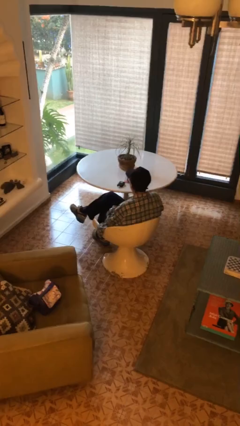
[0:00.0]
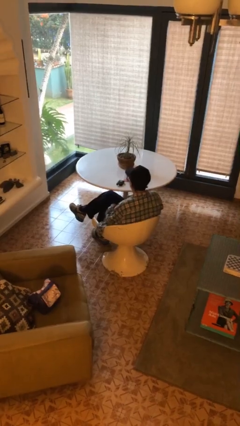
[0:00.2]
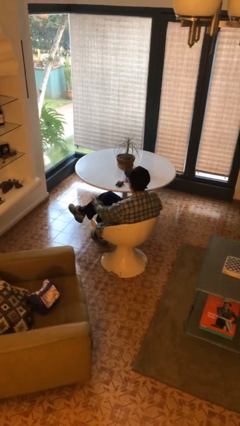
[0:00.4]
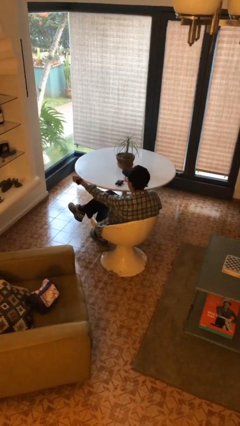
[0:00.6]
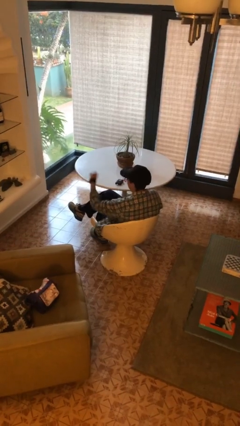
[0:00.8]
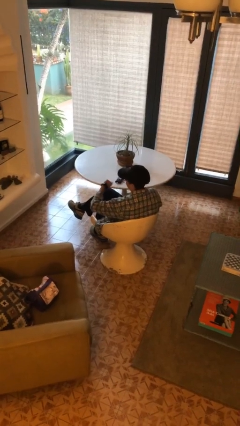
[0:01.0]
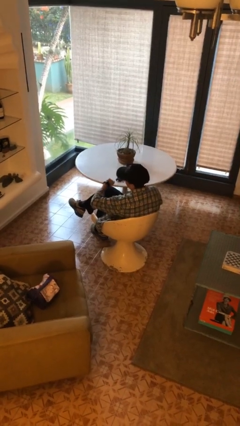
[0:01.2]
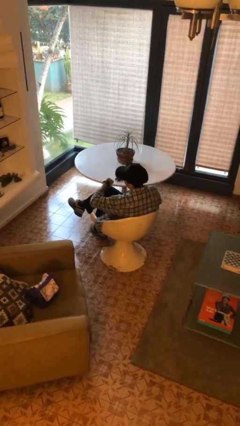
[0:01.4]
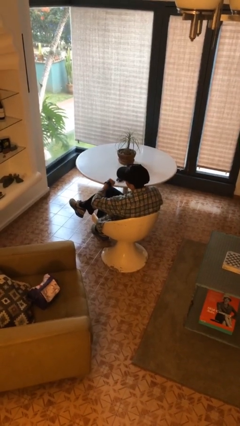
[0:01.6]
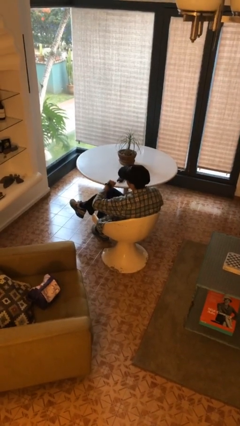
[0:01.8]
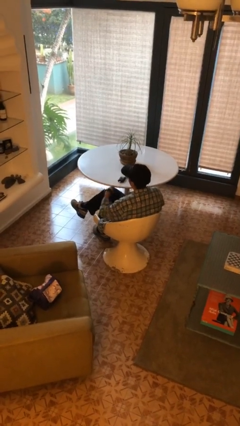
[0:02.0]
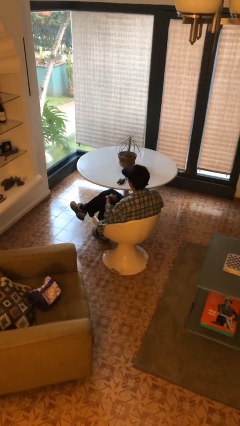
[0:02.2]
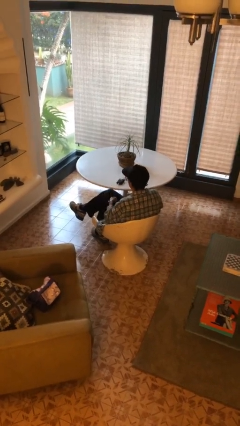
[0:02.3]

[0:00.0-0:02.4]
person looks at wristwatch

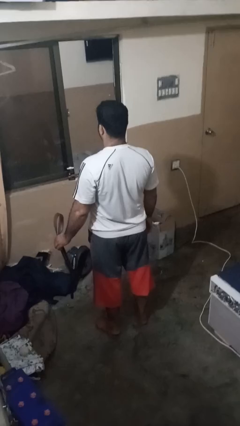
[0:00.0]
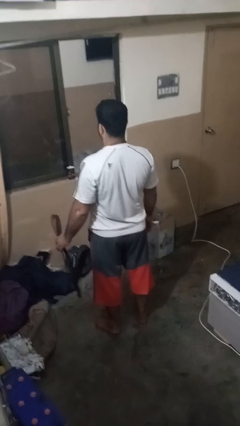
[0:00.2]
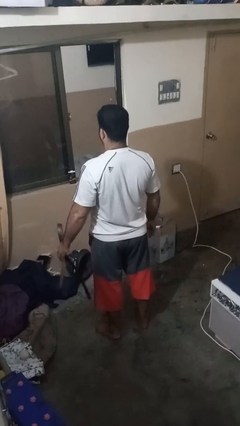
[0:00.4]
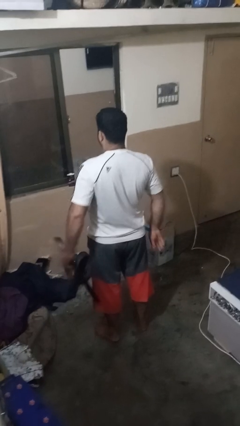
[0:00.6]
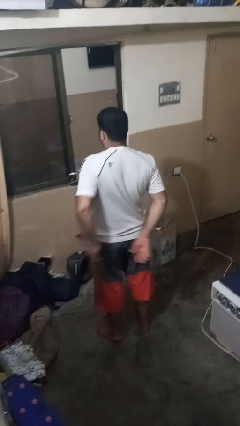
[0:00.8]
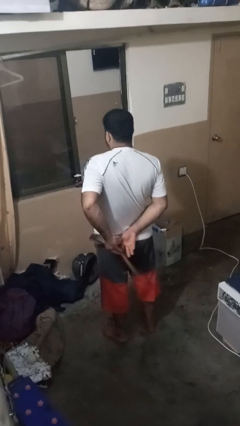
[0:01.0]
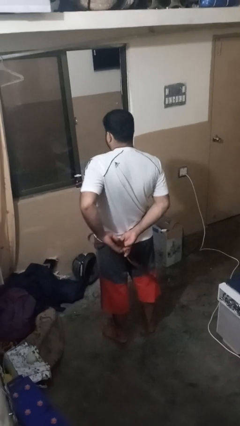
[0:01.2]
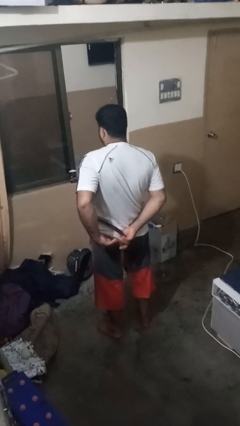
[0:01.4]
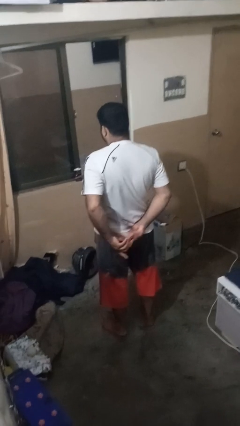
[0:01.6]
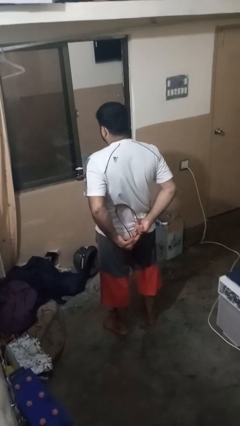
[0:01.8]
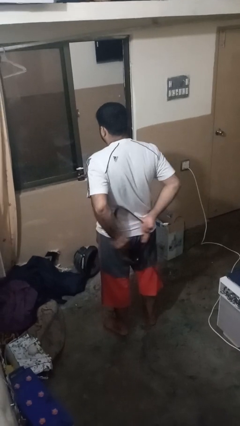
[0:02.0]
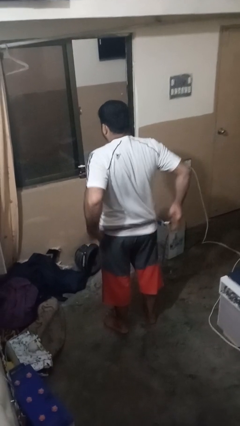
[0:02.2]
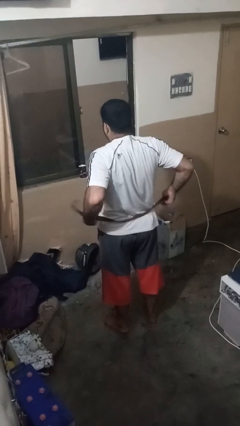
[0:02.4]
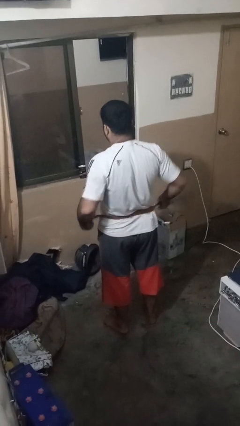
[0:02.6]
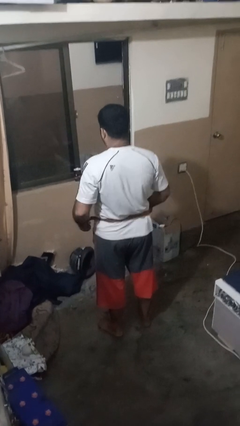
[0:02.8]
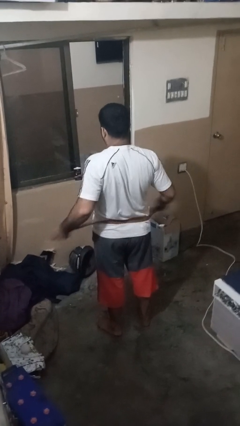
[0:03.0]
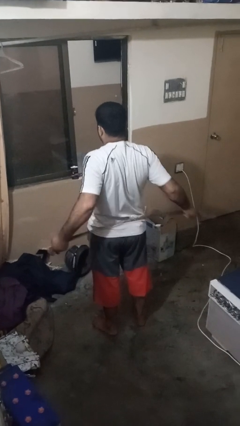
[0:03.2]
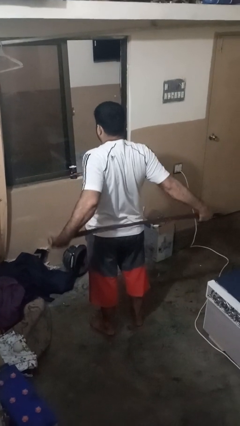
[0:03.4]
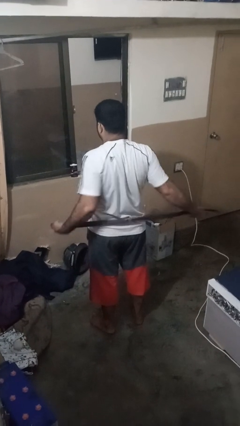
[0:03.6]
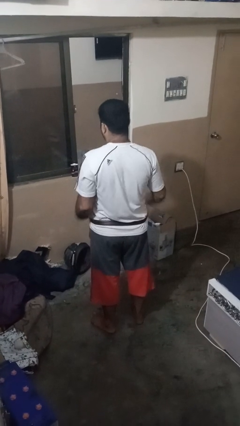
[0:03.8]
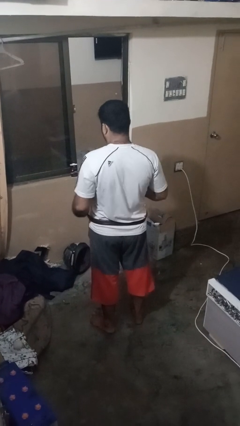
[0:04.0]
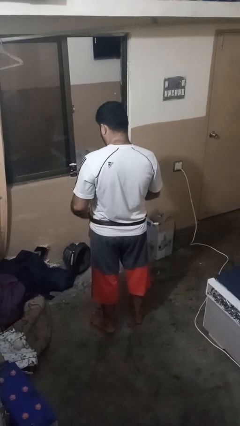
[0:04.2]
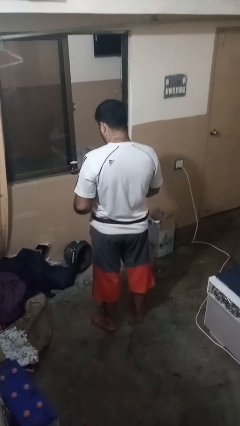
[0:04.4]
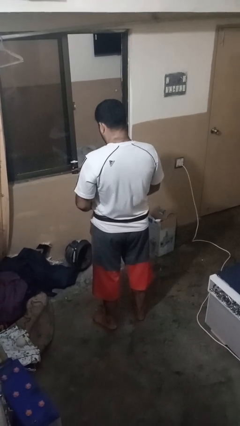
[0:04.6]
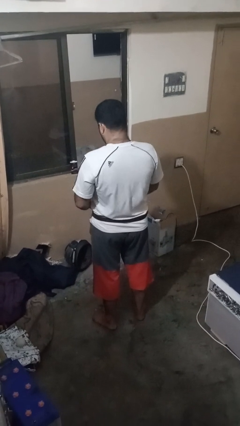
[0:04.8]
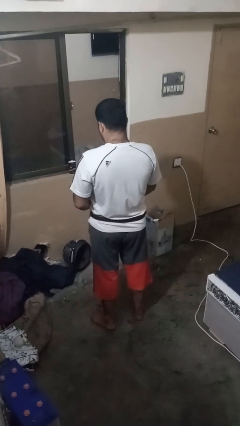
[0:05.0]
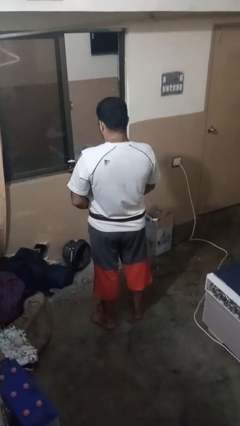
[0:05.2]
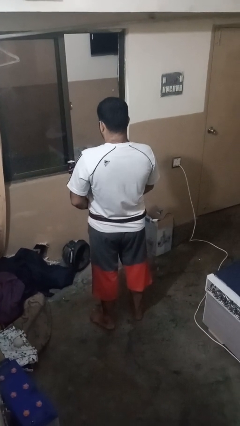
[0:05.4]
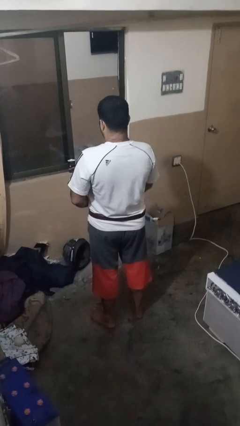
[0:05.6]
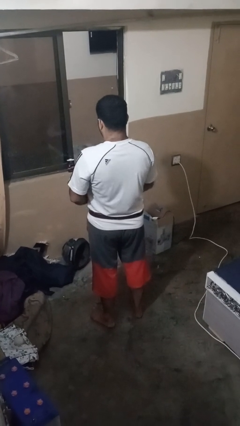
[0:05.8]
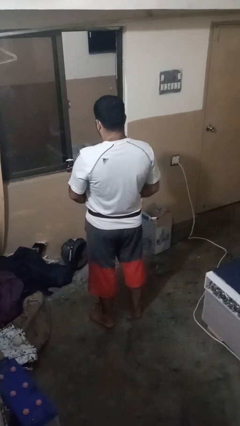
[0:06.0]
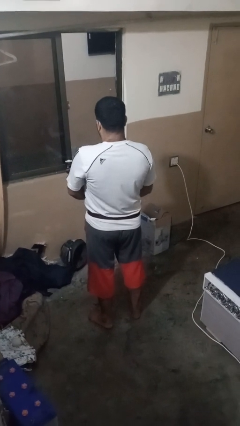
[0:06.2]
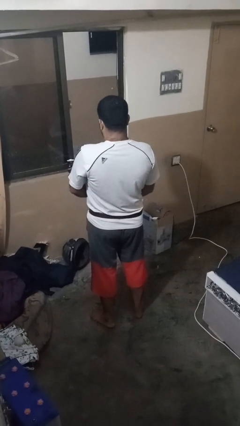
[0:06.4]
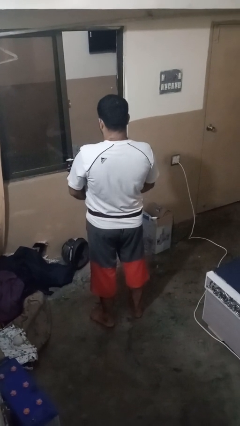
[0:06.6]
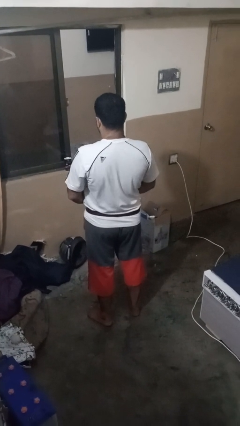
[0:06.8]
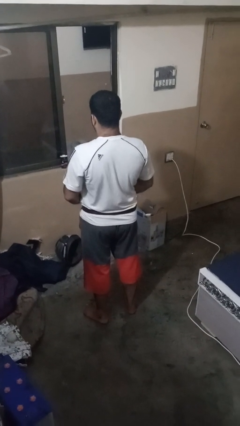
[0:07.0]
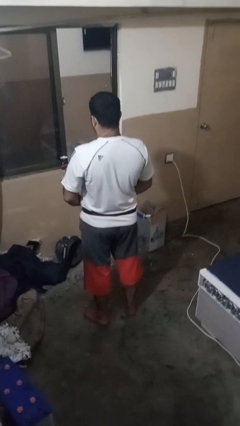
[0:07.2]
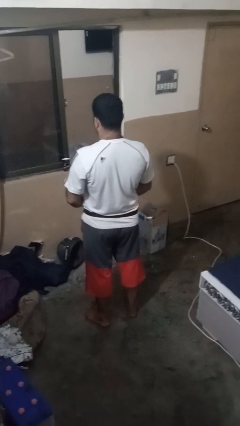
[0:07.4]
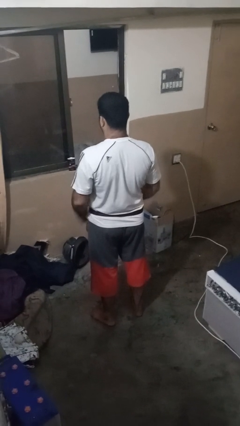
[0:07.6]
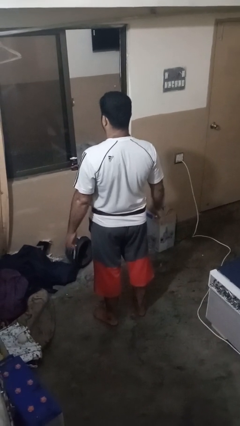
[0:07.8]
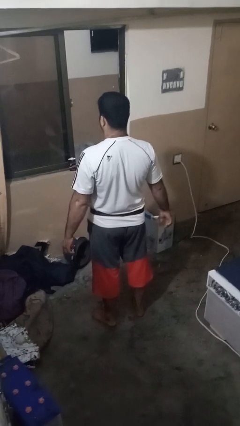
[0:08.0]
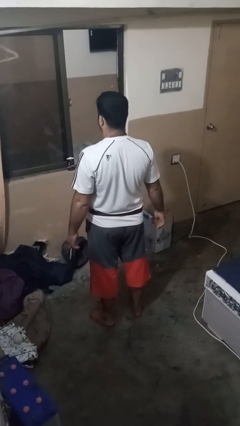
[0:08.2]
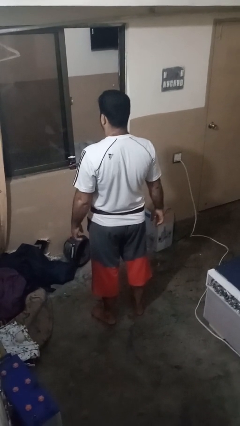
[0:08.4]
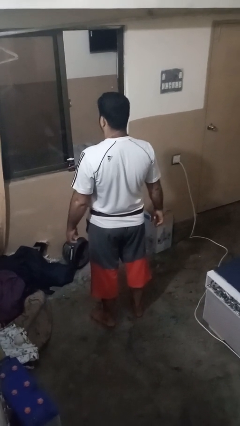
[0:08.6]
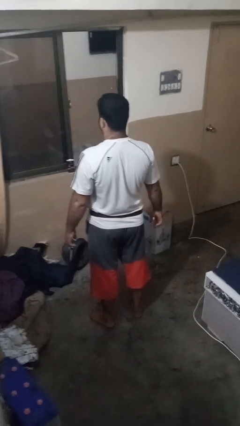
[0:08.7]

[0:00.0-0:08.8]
person puts on belt

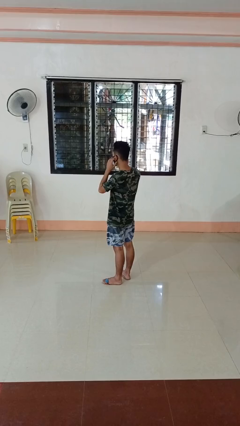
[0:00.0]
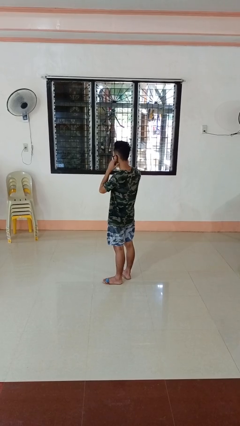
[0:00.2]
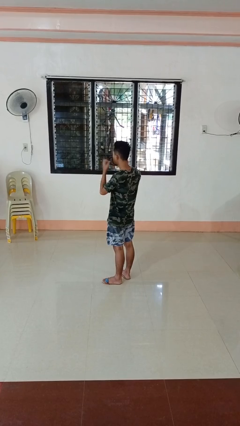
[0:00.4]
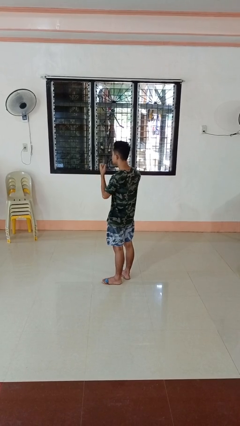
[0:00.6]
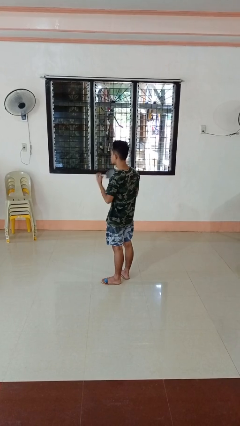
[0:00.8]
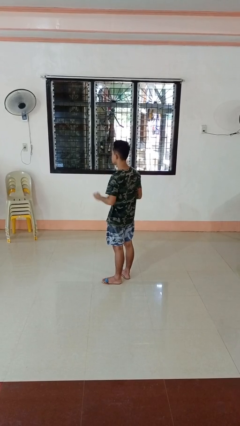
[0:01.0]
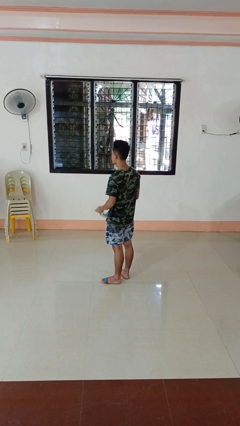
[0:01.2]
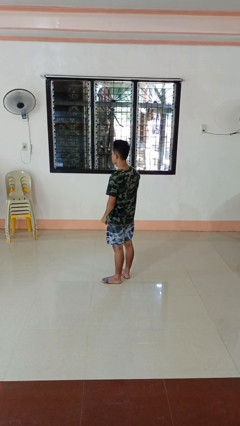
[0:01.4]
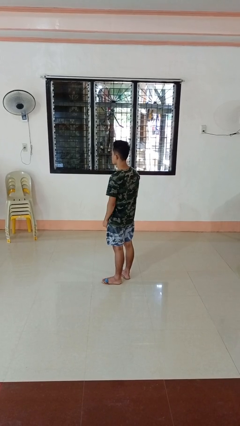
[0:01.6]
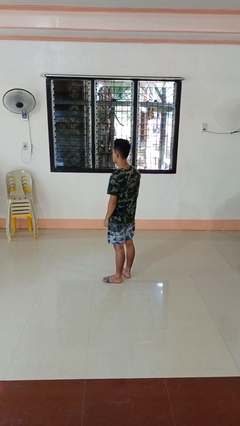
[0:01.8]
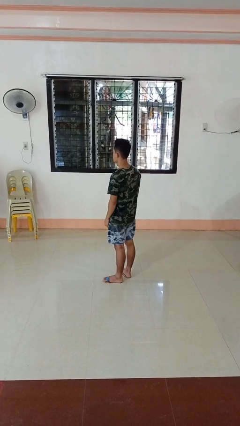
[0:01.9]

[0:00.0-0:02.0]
person takes off facemask

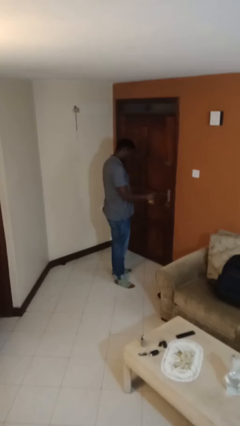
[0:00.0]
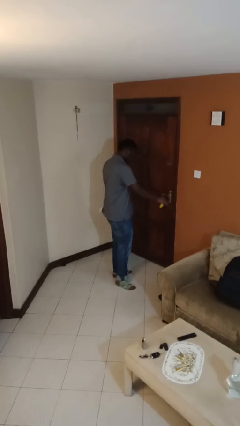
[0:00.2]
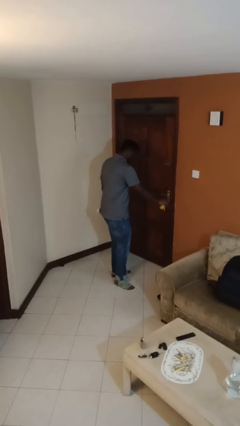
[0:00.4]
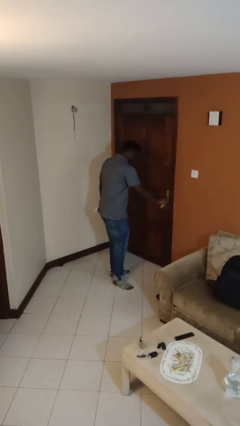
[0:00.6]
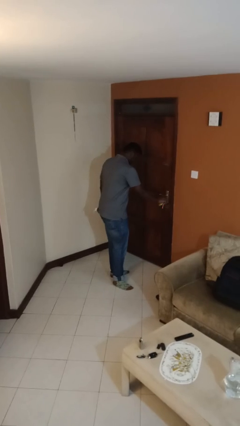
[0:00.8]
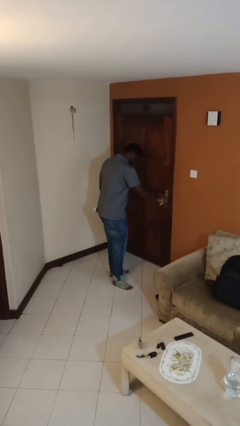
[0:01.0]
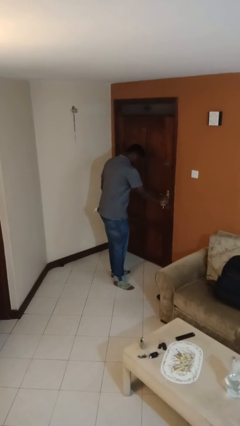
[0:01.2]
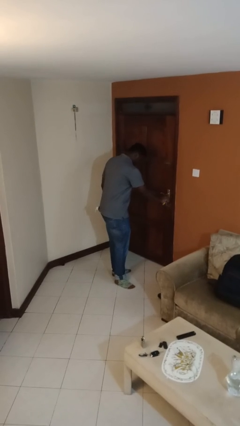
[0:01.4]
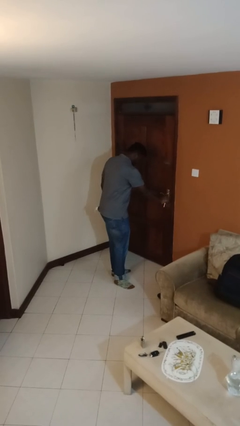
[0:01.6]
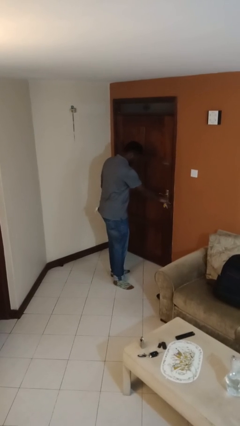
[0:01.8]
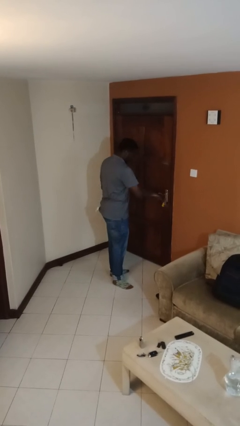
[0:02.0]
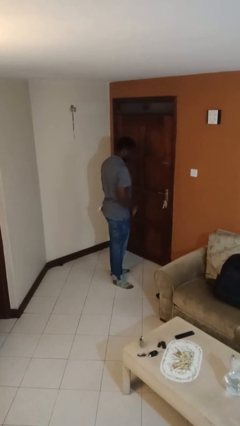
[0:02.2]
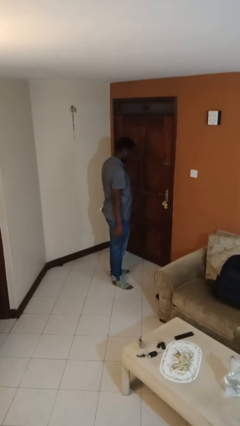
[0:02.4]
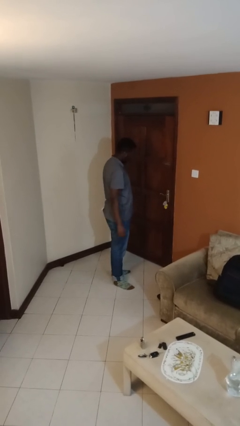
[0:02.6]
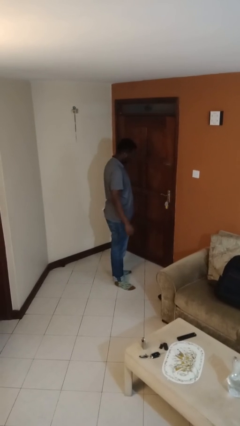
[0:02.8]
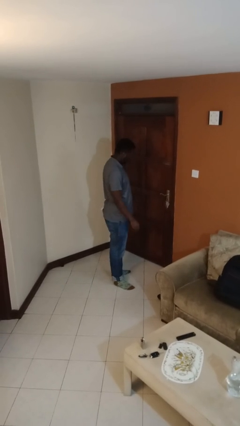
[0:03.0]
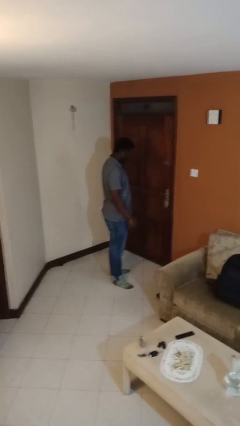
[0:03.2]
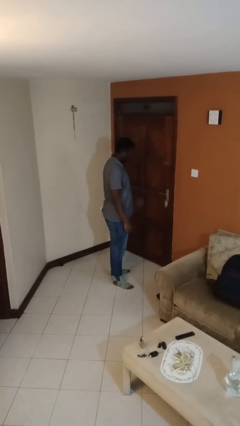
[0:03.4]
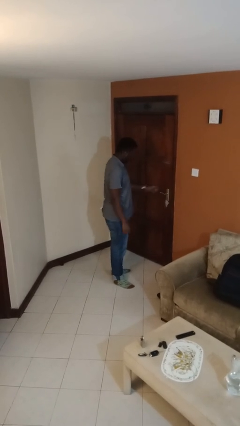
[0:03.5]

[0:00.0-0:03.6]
person unlocks door with keys

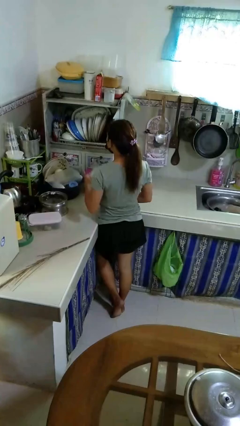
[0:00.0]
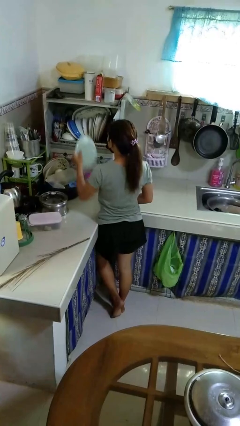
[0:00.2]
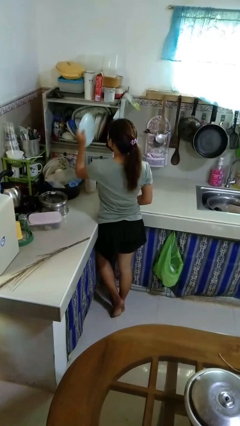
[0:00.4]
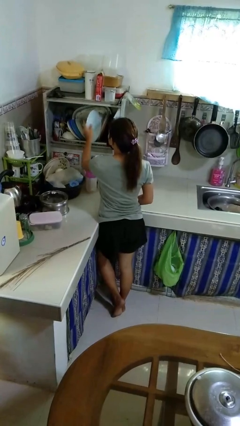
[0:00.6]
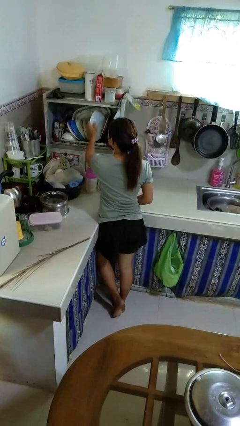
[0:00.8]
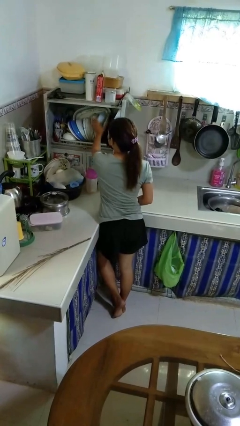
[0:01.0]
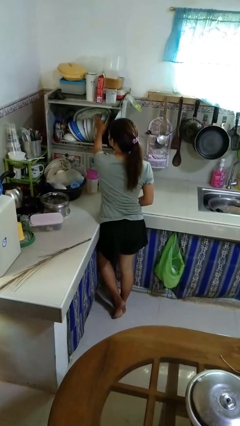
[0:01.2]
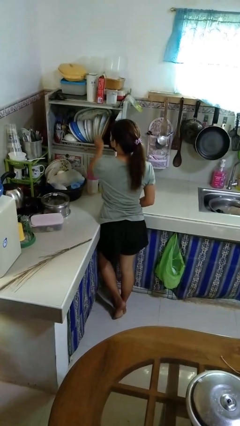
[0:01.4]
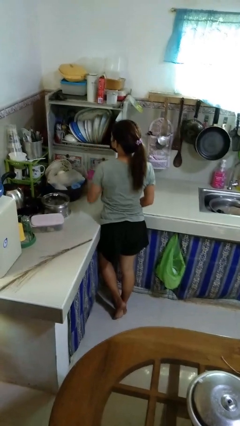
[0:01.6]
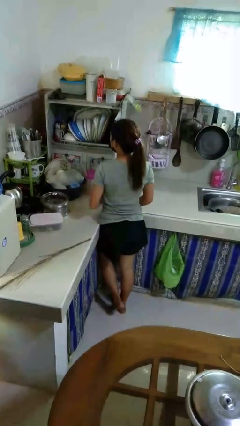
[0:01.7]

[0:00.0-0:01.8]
person puts object into kitchen drawer
